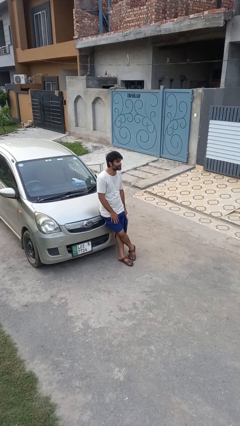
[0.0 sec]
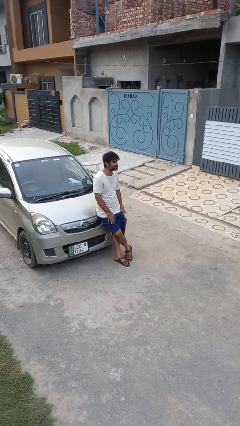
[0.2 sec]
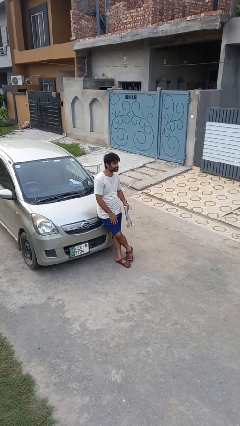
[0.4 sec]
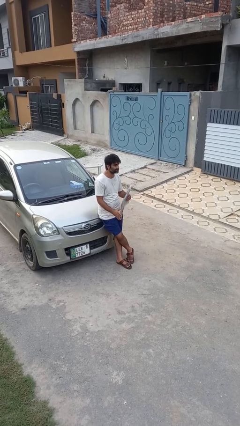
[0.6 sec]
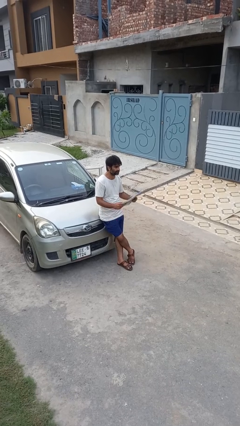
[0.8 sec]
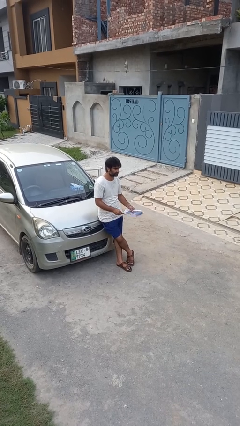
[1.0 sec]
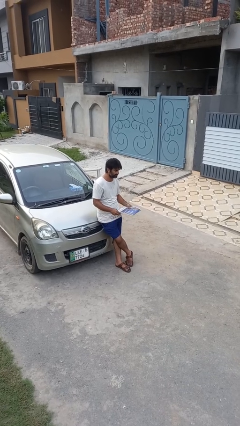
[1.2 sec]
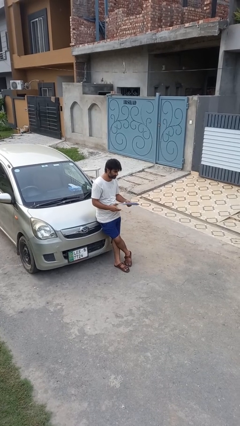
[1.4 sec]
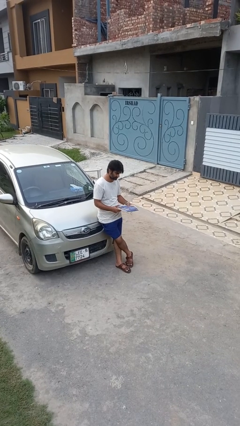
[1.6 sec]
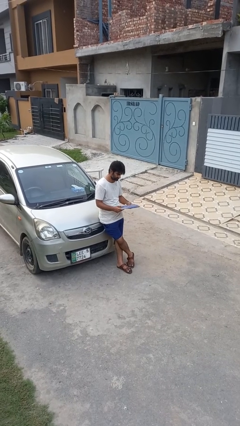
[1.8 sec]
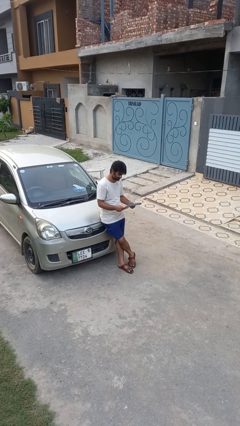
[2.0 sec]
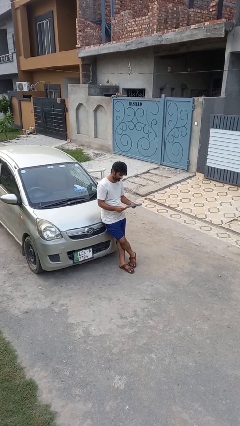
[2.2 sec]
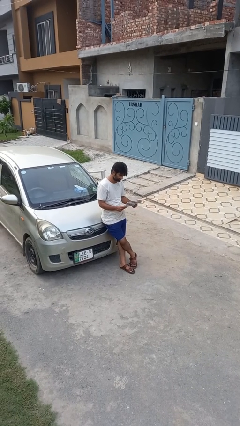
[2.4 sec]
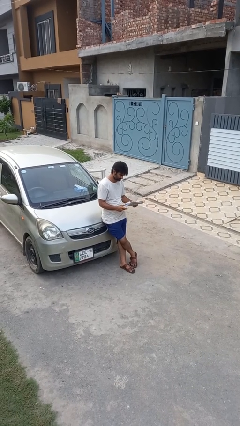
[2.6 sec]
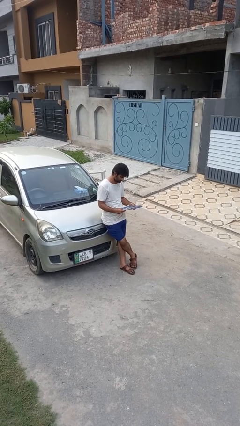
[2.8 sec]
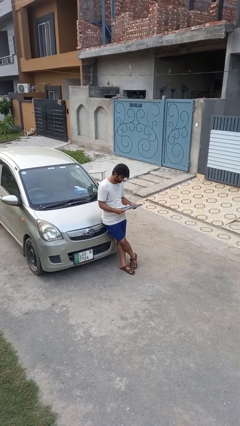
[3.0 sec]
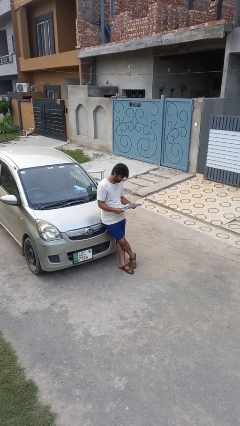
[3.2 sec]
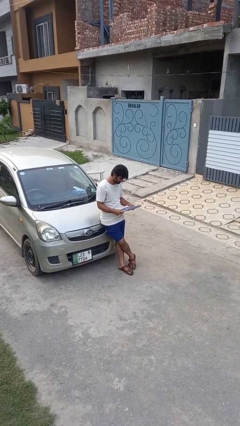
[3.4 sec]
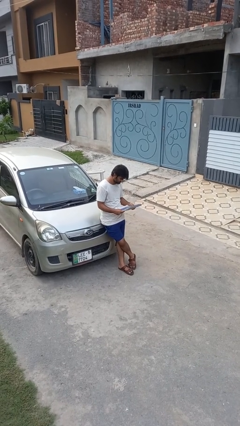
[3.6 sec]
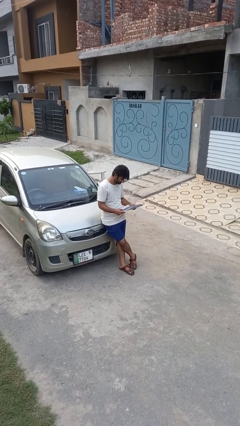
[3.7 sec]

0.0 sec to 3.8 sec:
person reads newspaper

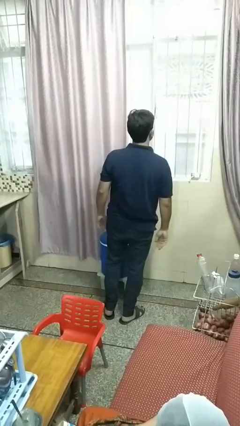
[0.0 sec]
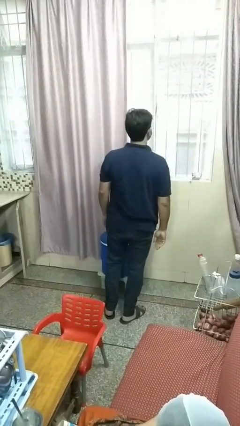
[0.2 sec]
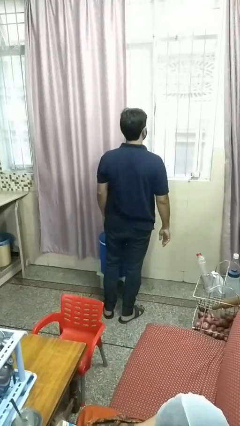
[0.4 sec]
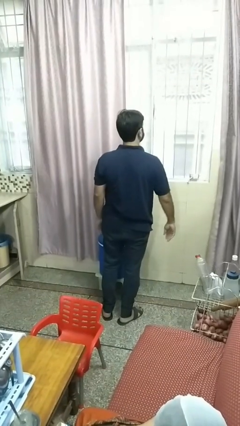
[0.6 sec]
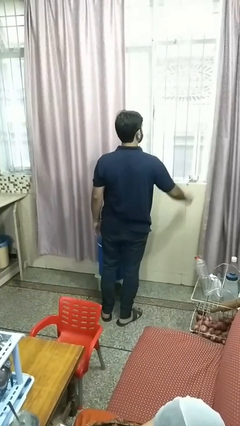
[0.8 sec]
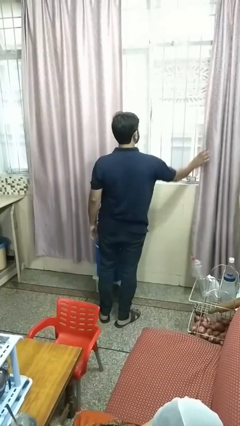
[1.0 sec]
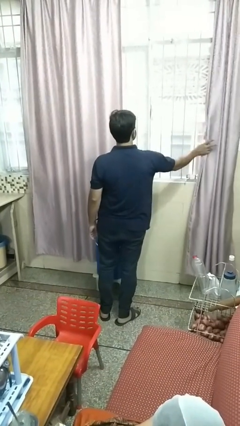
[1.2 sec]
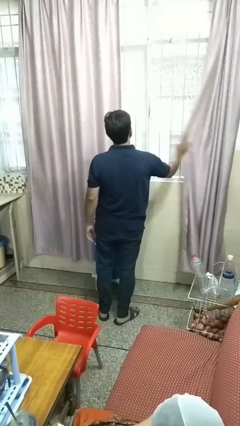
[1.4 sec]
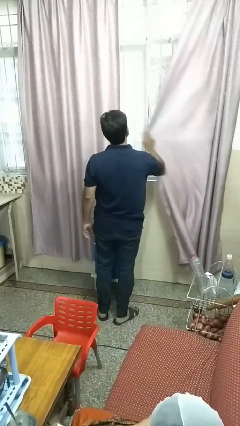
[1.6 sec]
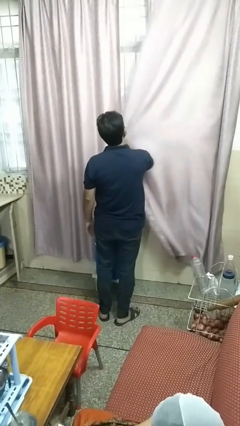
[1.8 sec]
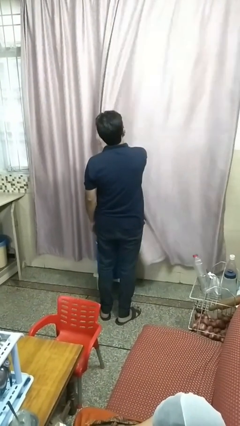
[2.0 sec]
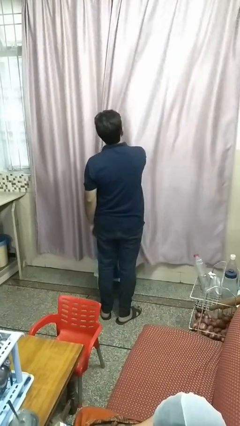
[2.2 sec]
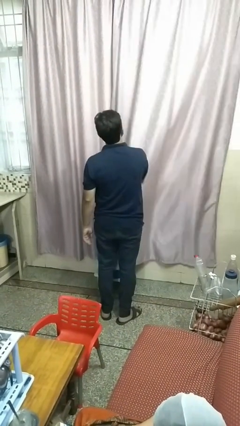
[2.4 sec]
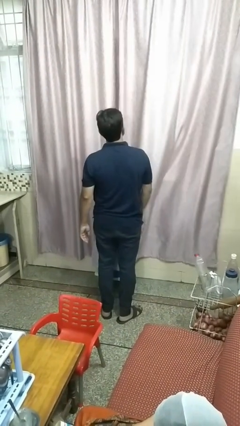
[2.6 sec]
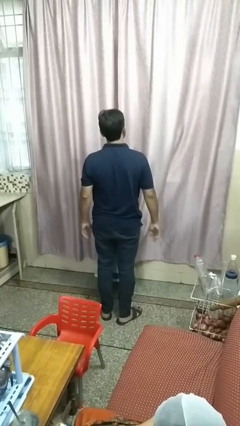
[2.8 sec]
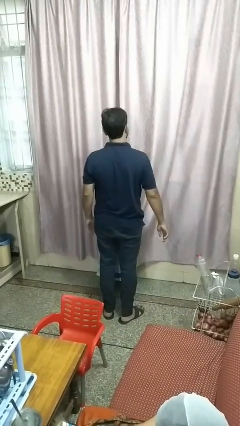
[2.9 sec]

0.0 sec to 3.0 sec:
person closes curtains

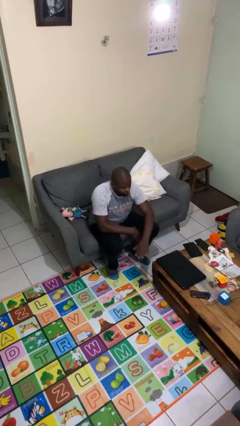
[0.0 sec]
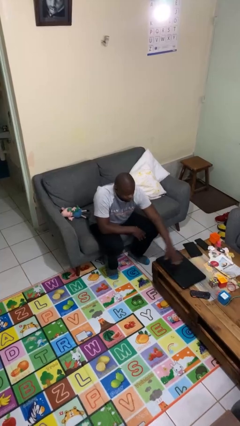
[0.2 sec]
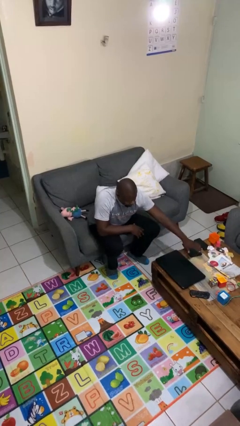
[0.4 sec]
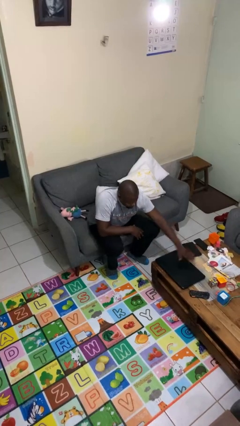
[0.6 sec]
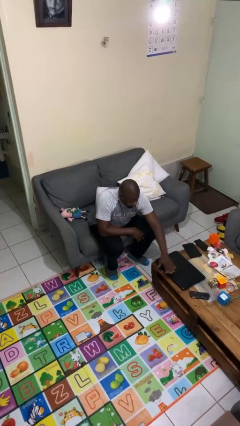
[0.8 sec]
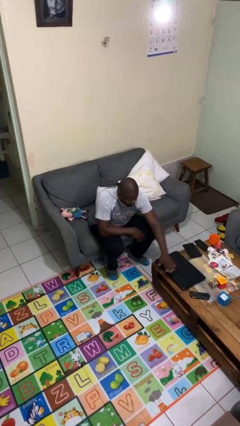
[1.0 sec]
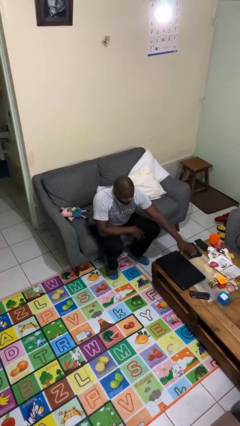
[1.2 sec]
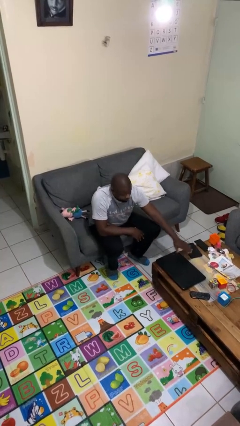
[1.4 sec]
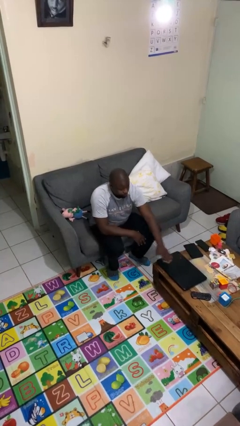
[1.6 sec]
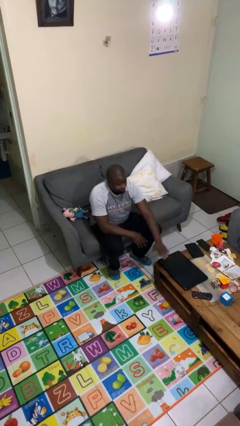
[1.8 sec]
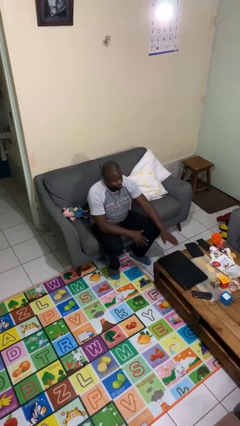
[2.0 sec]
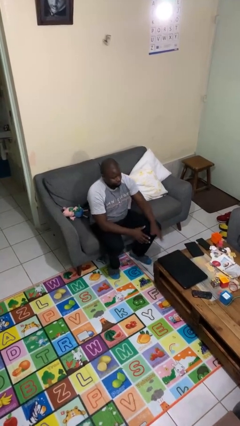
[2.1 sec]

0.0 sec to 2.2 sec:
person waves hand over object

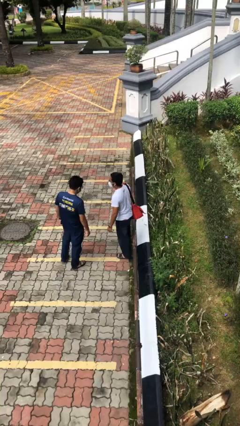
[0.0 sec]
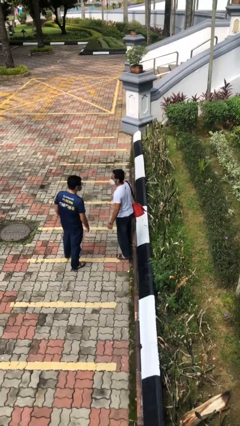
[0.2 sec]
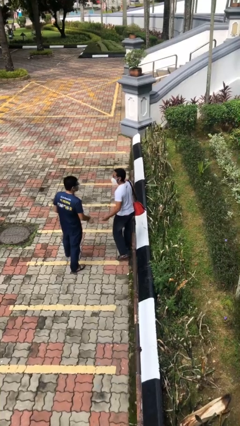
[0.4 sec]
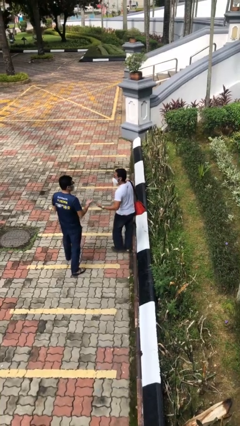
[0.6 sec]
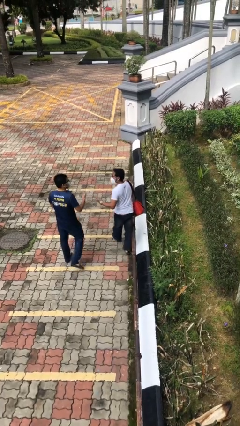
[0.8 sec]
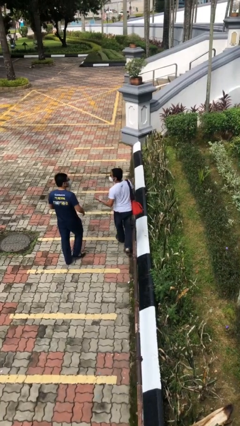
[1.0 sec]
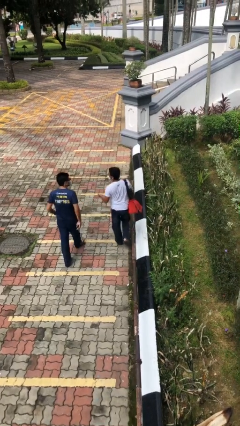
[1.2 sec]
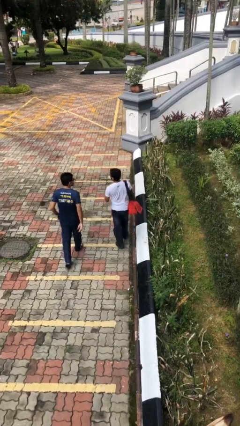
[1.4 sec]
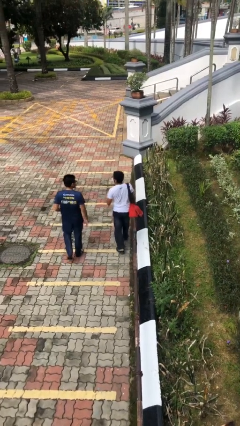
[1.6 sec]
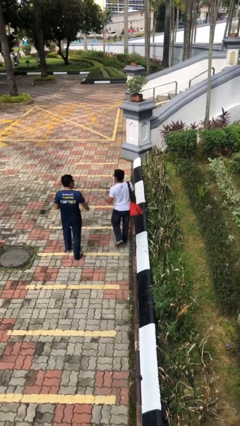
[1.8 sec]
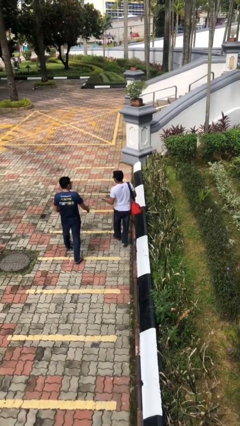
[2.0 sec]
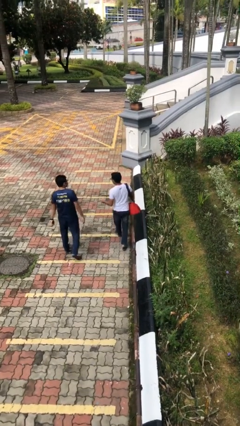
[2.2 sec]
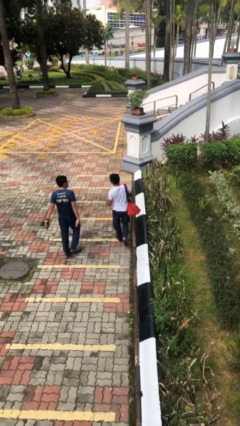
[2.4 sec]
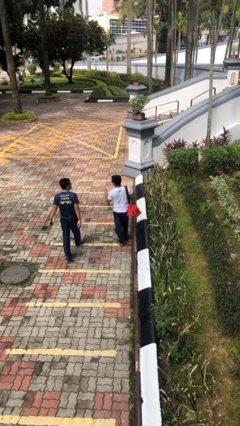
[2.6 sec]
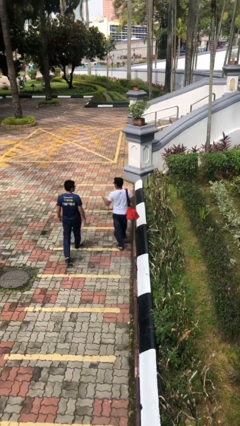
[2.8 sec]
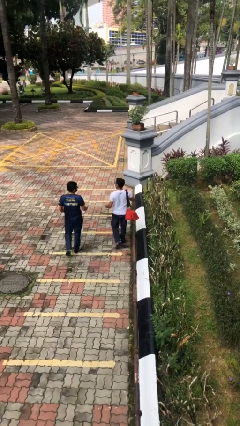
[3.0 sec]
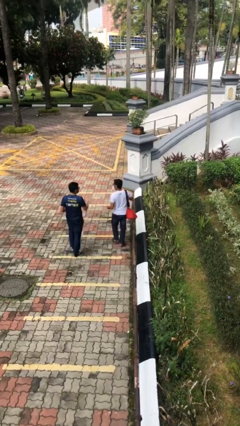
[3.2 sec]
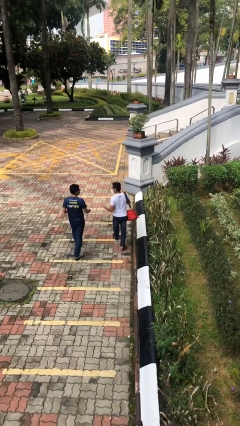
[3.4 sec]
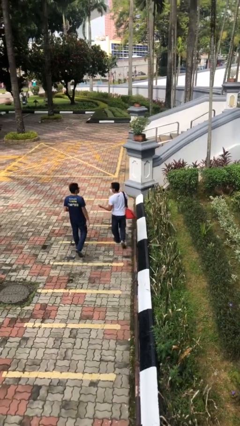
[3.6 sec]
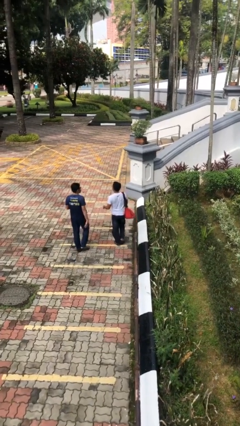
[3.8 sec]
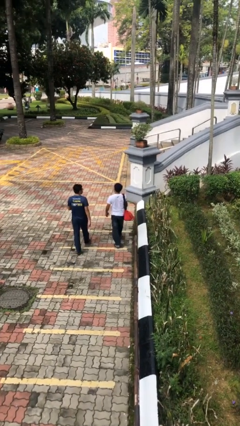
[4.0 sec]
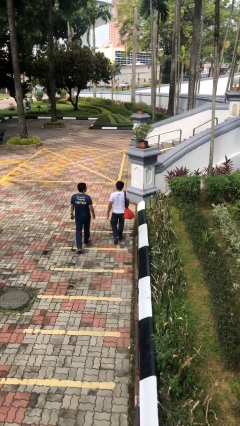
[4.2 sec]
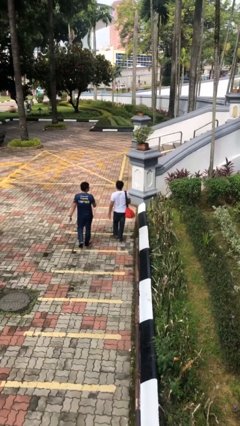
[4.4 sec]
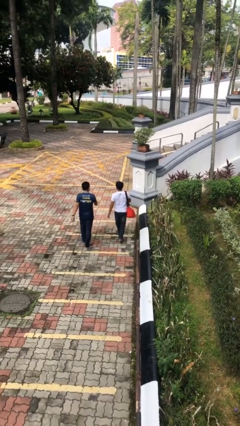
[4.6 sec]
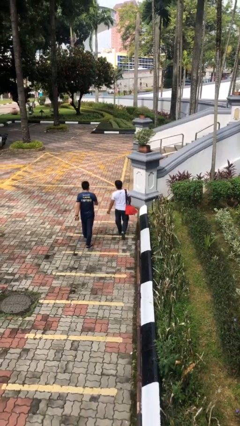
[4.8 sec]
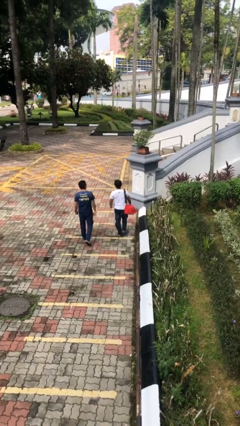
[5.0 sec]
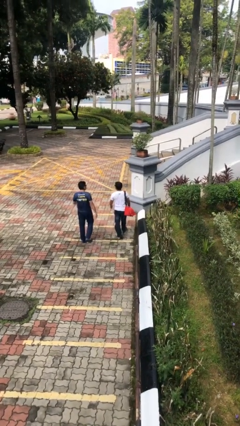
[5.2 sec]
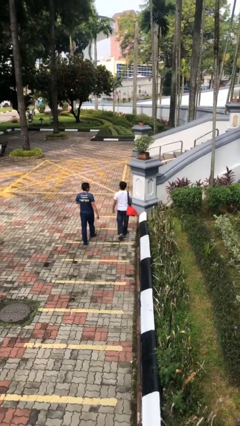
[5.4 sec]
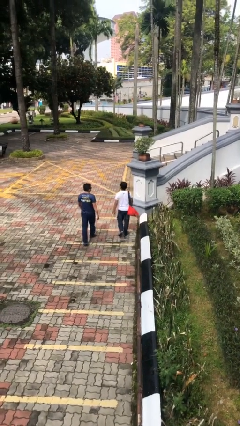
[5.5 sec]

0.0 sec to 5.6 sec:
person talks to person

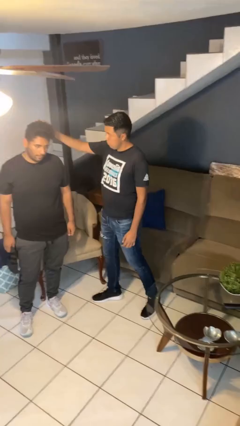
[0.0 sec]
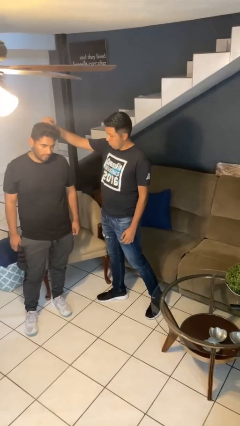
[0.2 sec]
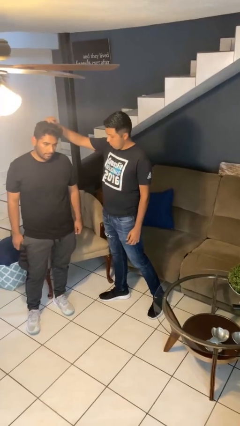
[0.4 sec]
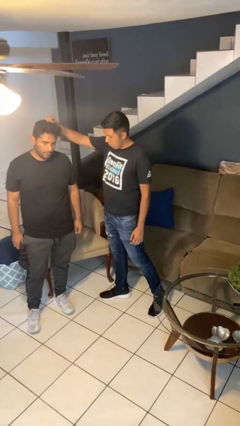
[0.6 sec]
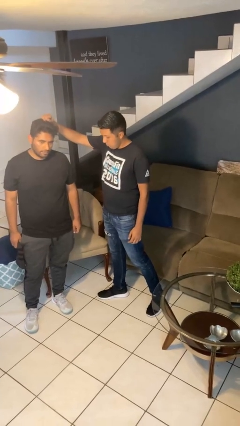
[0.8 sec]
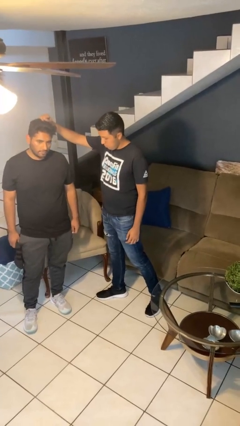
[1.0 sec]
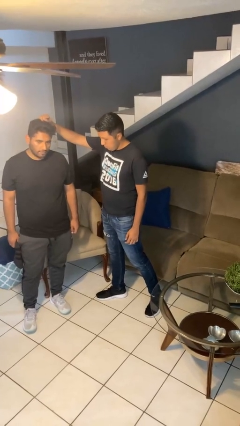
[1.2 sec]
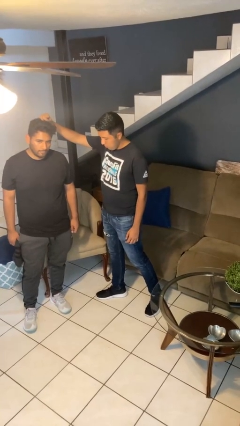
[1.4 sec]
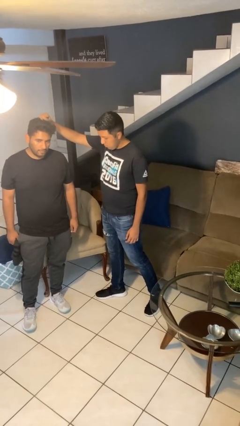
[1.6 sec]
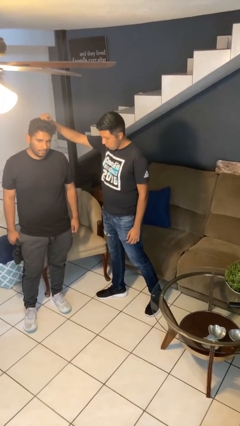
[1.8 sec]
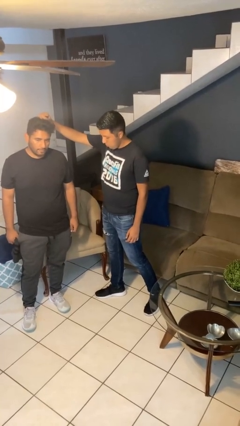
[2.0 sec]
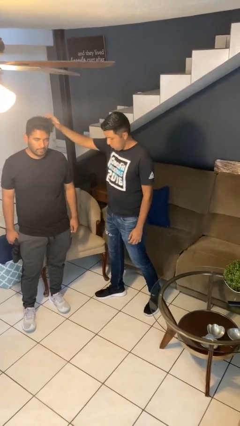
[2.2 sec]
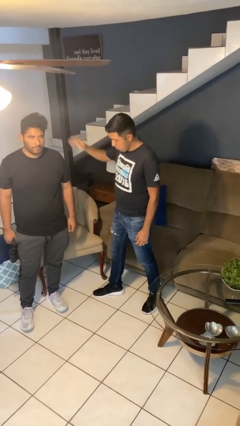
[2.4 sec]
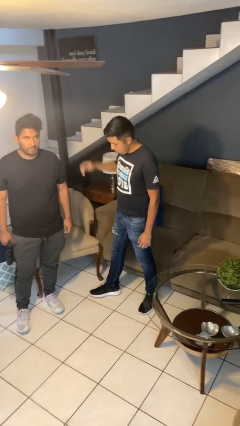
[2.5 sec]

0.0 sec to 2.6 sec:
person grabs person by hair

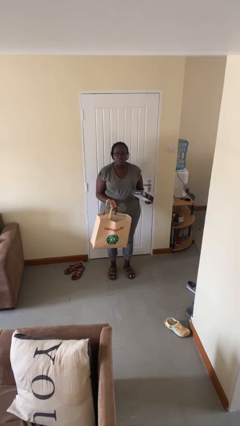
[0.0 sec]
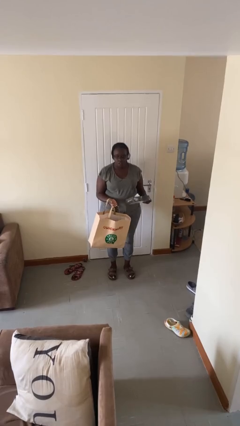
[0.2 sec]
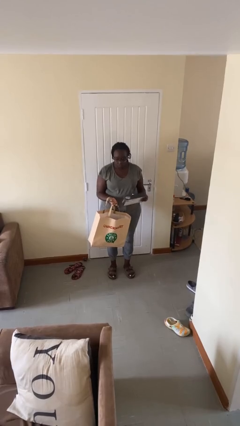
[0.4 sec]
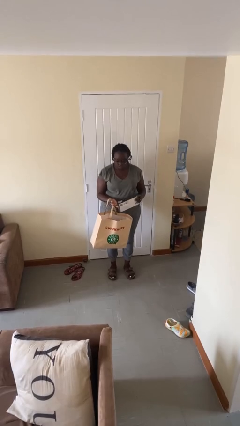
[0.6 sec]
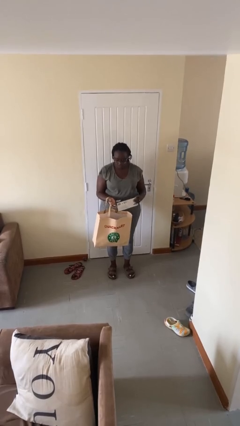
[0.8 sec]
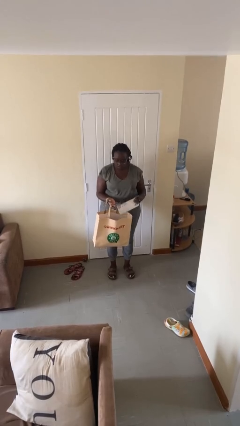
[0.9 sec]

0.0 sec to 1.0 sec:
person puts object into bag
